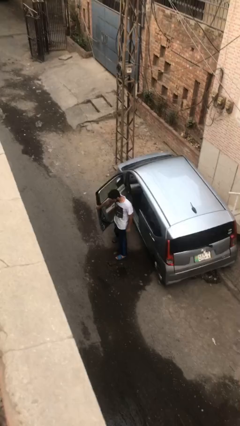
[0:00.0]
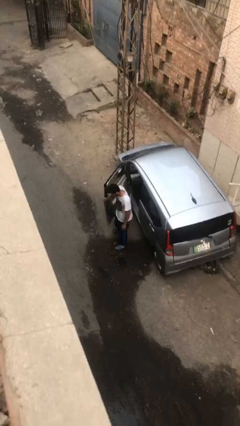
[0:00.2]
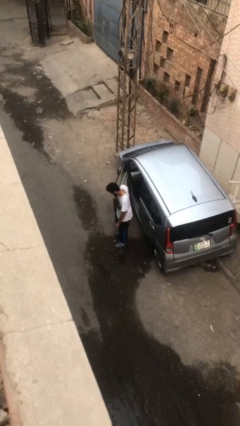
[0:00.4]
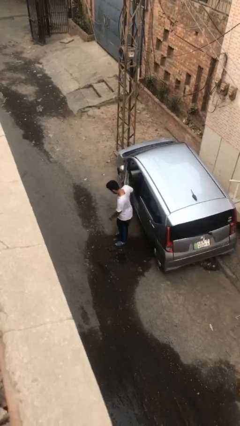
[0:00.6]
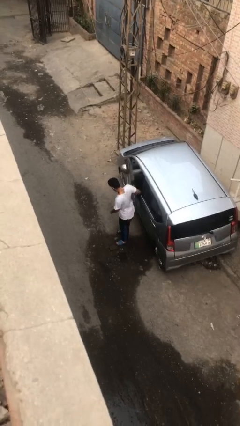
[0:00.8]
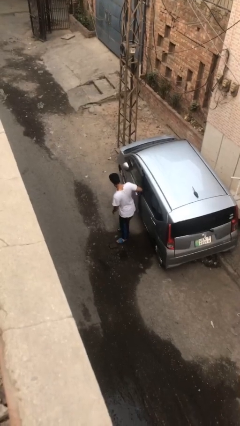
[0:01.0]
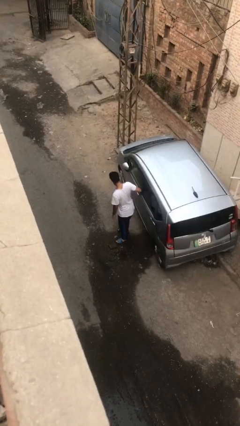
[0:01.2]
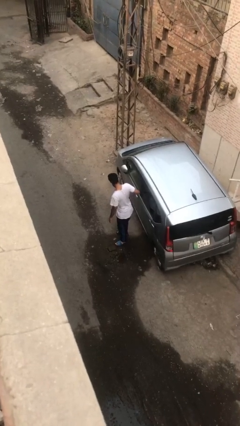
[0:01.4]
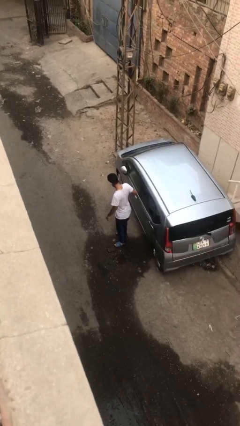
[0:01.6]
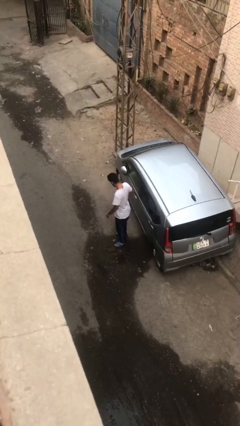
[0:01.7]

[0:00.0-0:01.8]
person closes car door

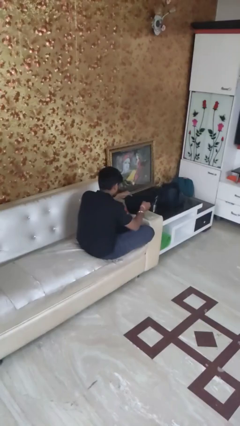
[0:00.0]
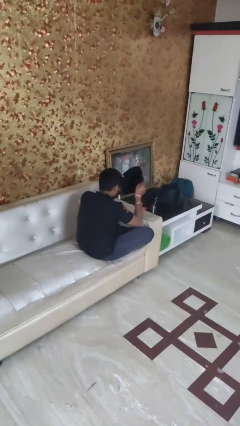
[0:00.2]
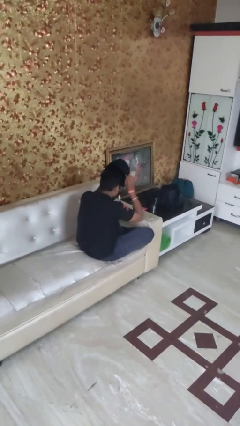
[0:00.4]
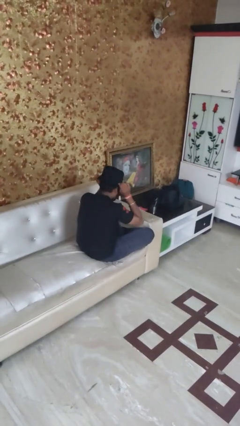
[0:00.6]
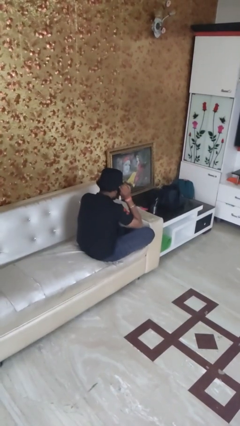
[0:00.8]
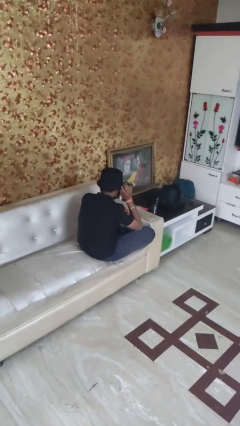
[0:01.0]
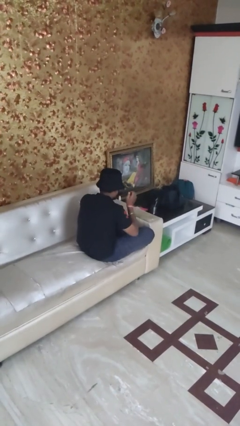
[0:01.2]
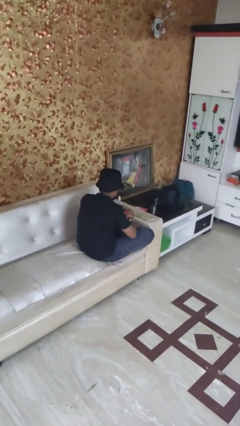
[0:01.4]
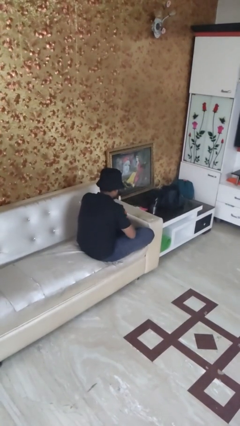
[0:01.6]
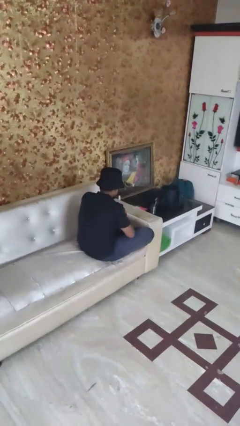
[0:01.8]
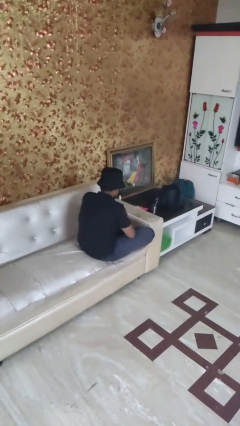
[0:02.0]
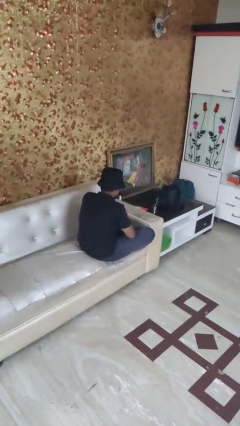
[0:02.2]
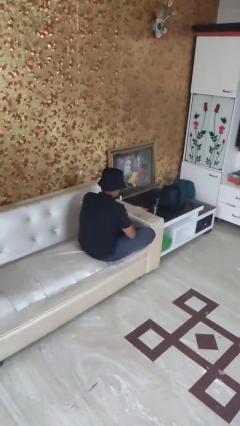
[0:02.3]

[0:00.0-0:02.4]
person puts on hat

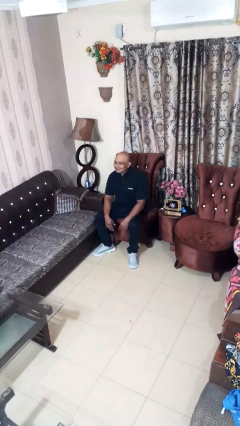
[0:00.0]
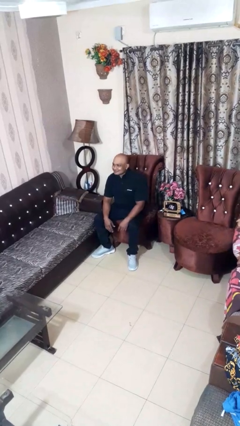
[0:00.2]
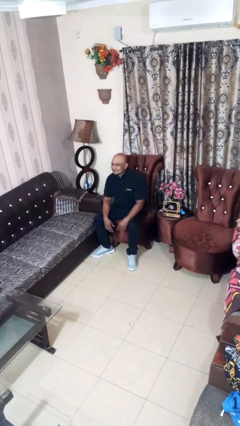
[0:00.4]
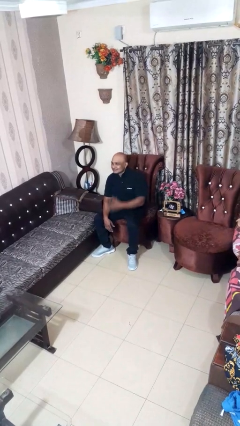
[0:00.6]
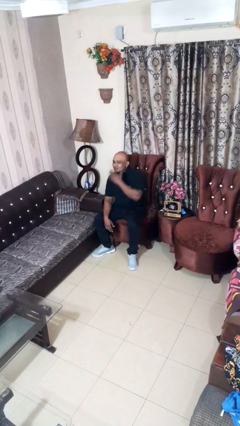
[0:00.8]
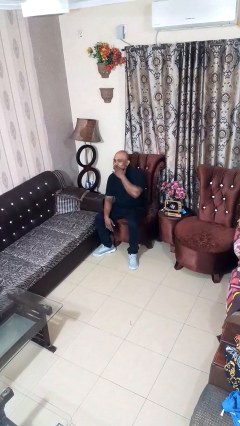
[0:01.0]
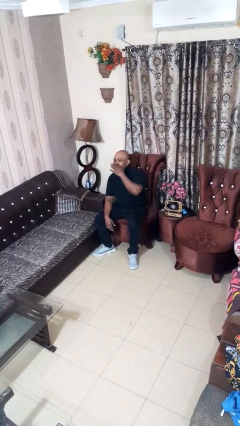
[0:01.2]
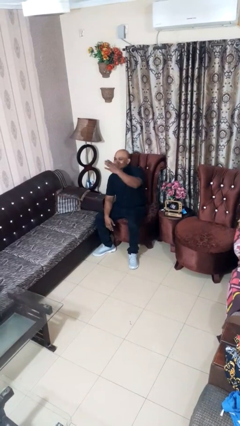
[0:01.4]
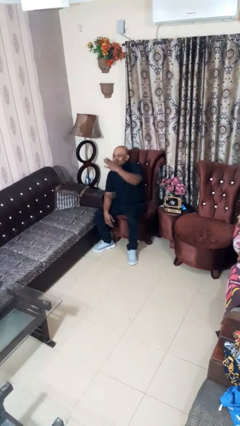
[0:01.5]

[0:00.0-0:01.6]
person gestures blow kiss

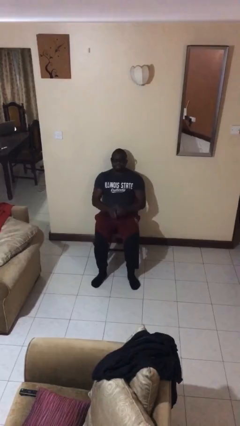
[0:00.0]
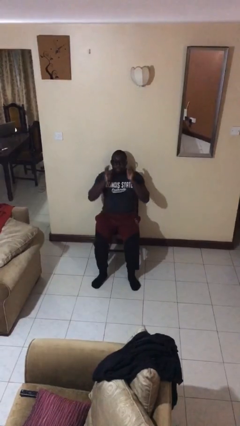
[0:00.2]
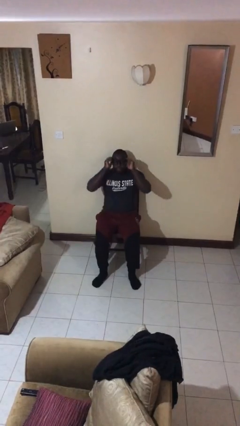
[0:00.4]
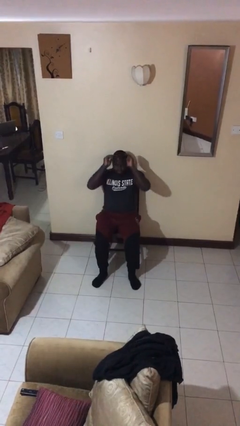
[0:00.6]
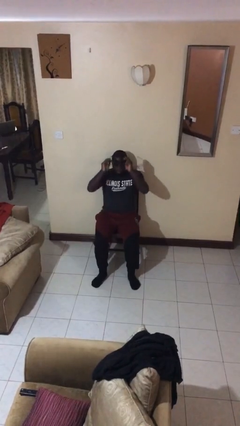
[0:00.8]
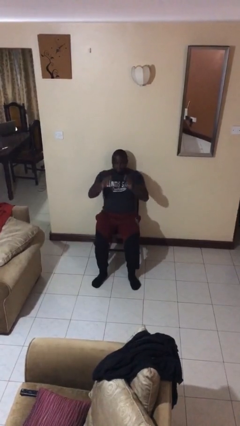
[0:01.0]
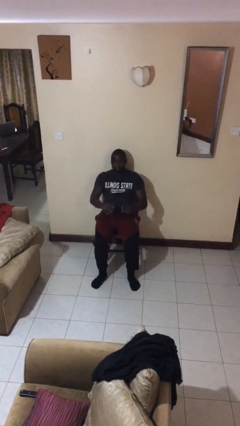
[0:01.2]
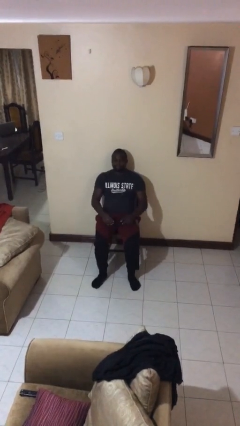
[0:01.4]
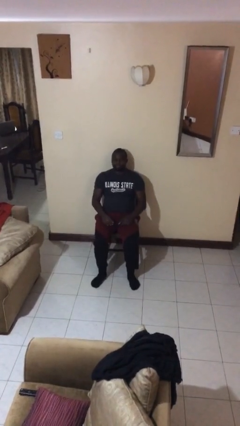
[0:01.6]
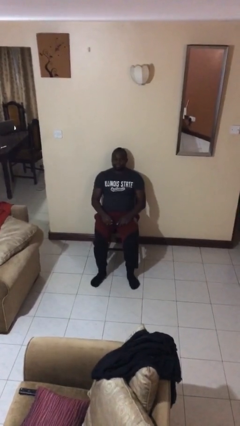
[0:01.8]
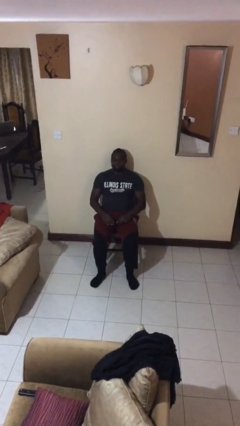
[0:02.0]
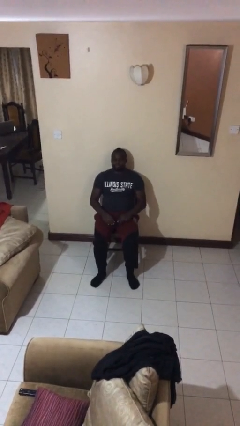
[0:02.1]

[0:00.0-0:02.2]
person takes off glasses

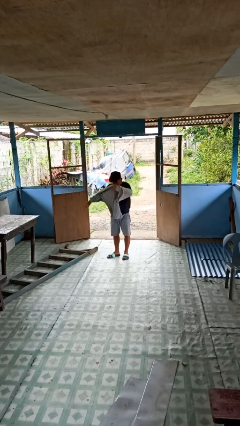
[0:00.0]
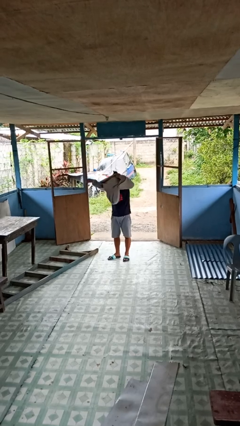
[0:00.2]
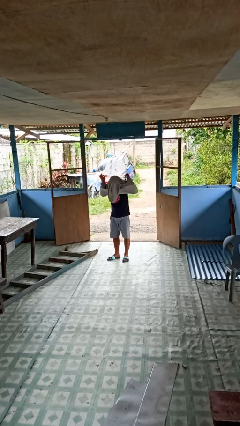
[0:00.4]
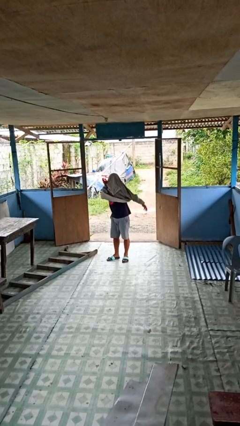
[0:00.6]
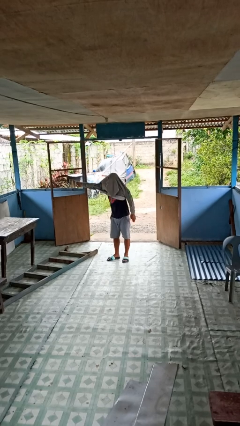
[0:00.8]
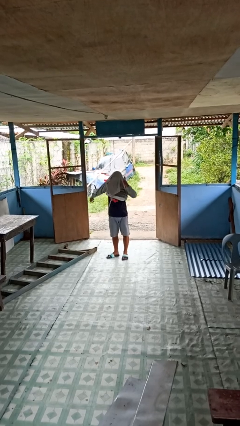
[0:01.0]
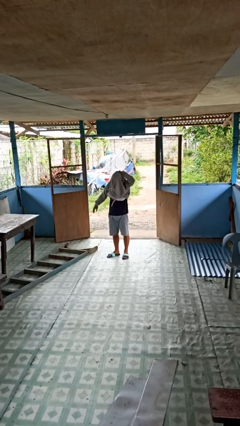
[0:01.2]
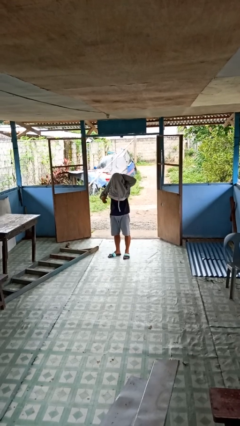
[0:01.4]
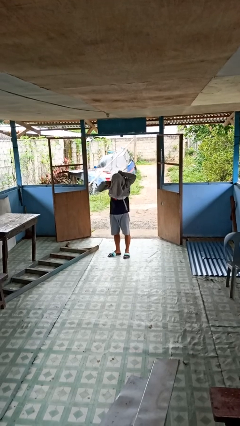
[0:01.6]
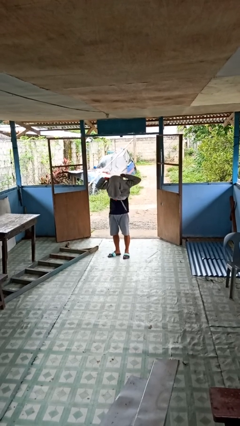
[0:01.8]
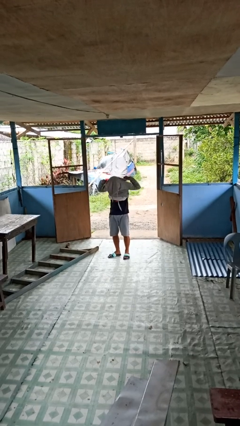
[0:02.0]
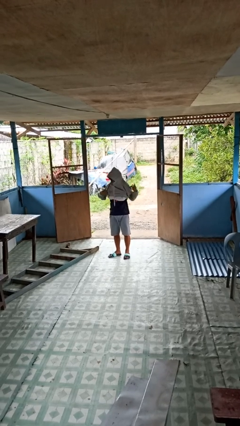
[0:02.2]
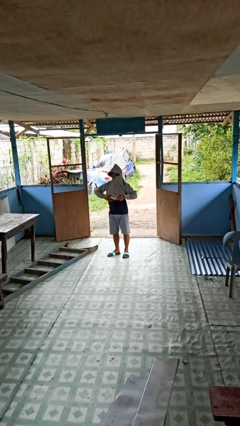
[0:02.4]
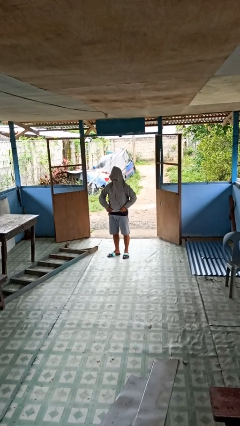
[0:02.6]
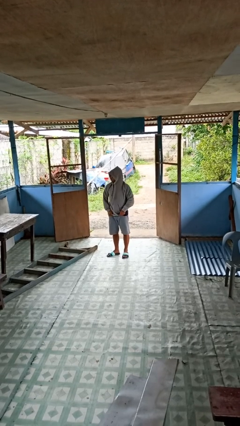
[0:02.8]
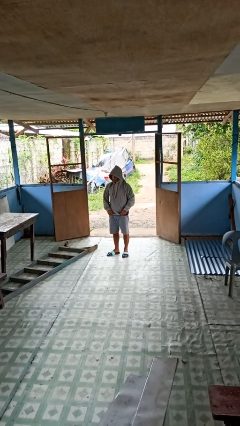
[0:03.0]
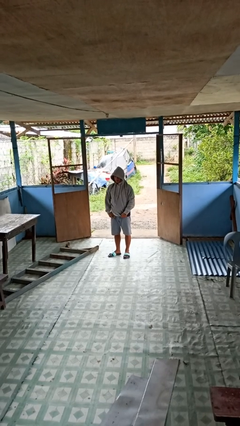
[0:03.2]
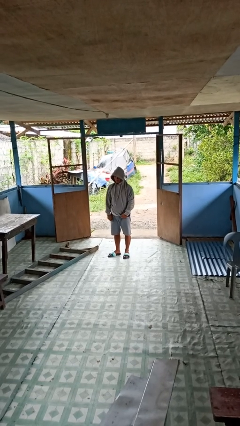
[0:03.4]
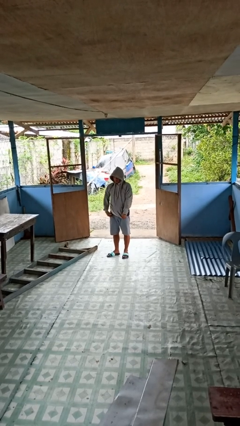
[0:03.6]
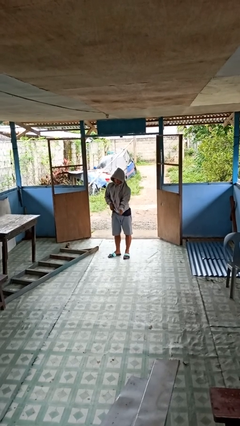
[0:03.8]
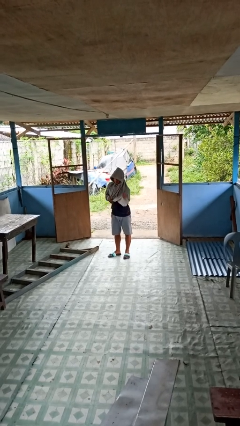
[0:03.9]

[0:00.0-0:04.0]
person puts on hoodie

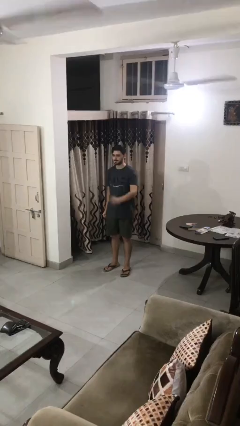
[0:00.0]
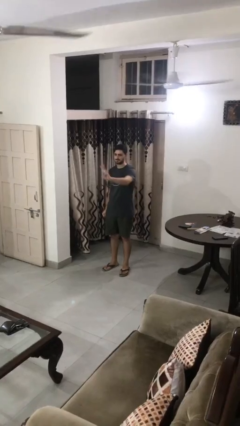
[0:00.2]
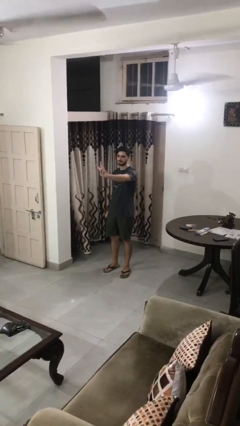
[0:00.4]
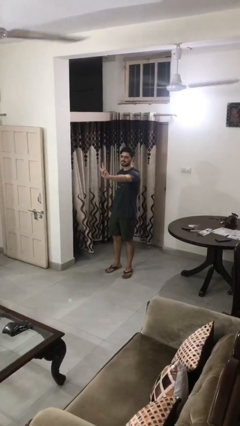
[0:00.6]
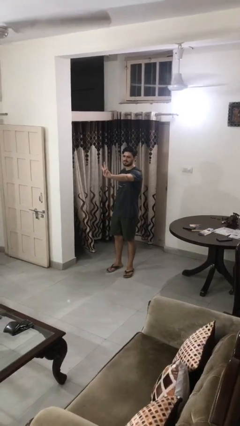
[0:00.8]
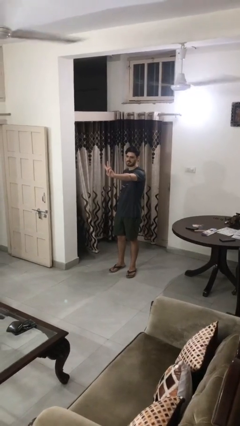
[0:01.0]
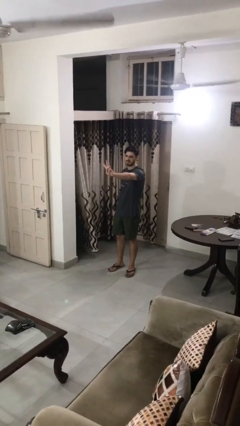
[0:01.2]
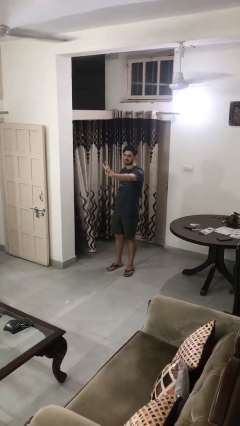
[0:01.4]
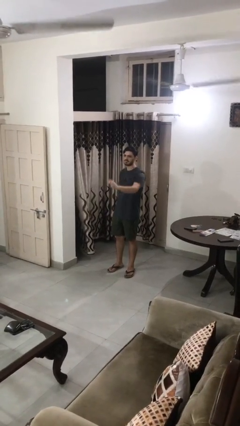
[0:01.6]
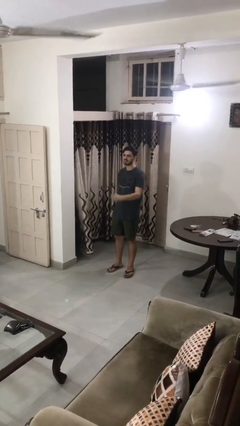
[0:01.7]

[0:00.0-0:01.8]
person gestures peace

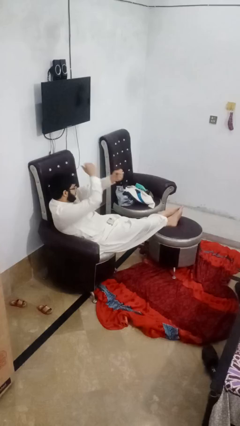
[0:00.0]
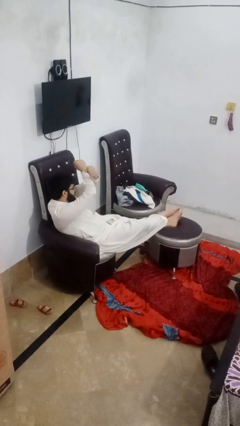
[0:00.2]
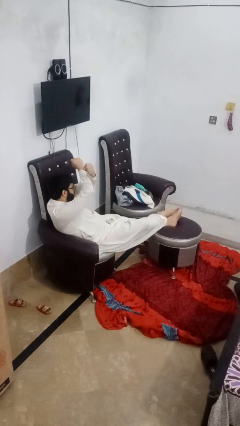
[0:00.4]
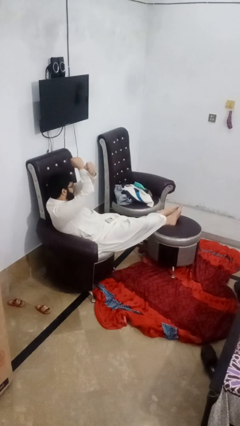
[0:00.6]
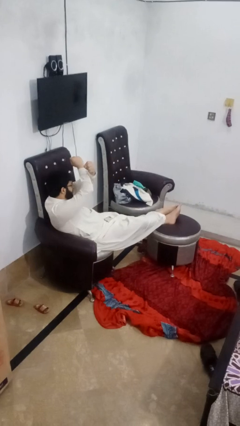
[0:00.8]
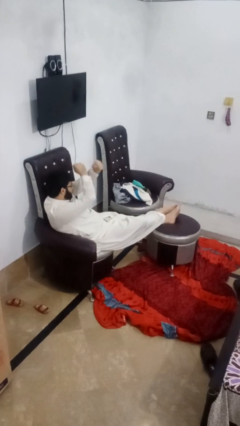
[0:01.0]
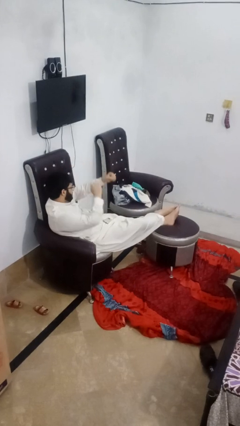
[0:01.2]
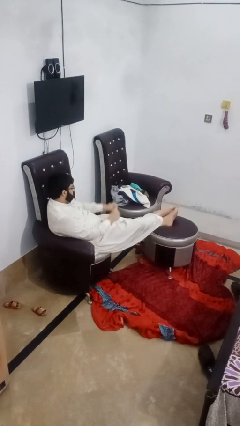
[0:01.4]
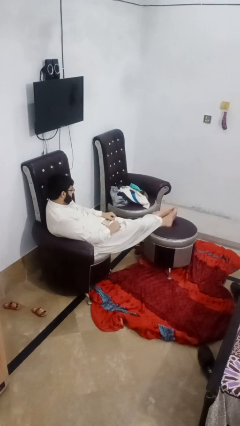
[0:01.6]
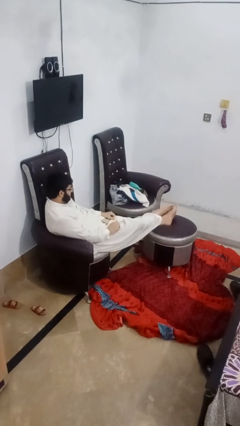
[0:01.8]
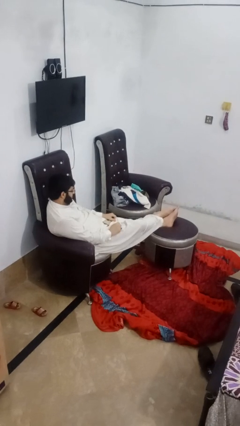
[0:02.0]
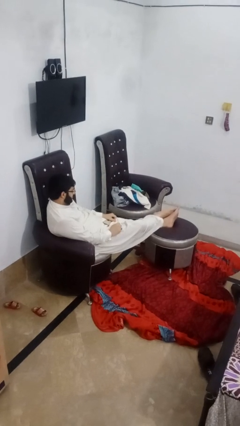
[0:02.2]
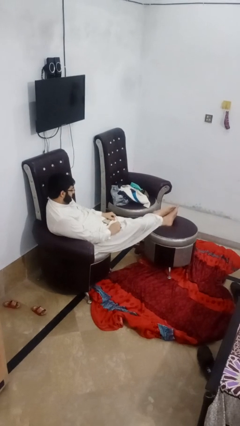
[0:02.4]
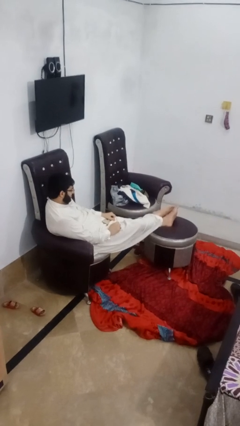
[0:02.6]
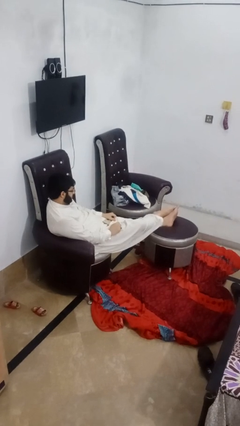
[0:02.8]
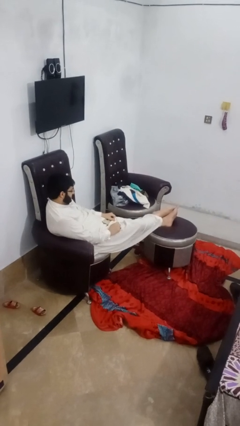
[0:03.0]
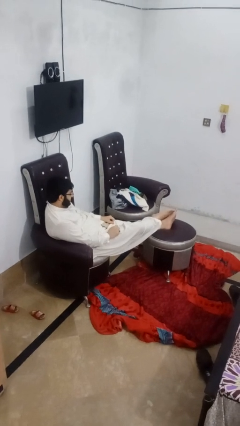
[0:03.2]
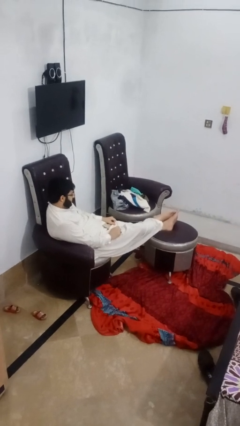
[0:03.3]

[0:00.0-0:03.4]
person crosses arms
